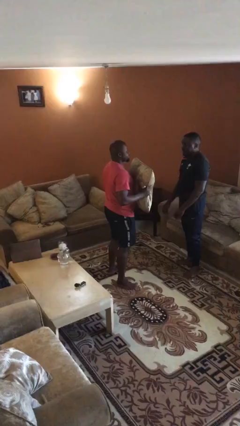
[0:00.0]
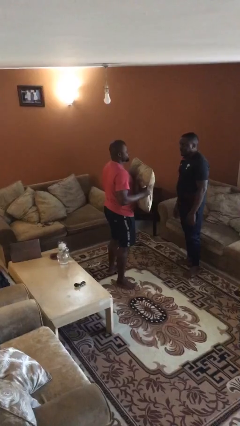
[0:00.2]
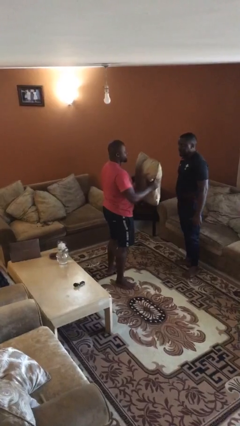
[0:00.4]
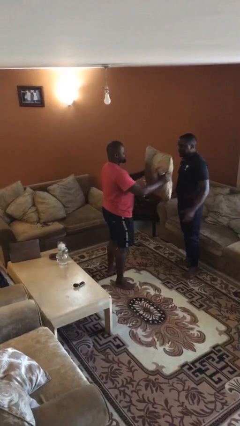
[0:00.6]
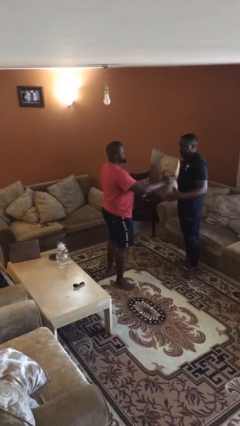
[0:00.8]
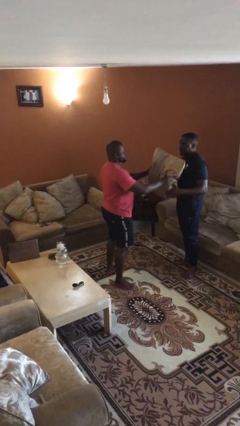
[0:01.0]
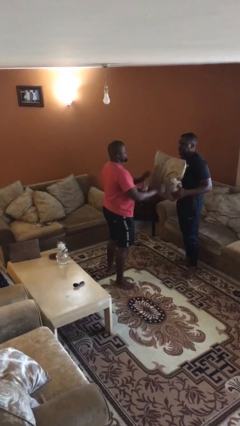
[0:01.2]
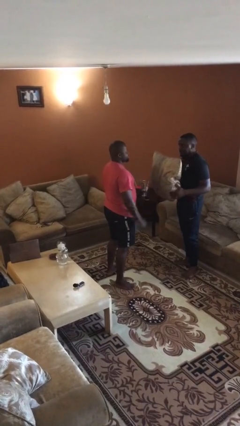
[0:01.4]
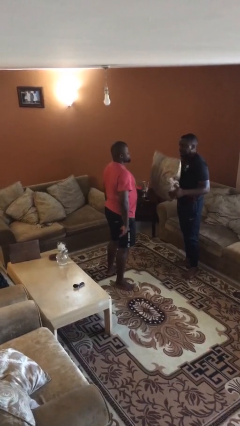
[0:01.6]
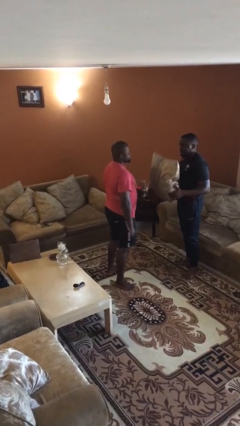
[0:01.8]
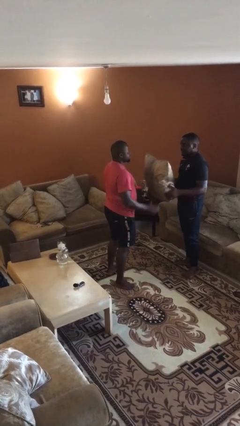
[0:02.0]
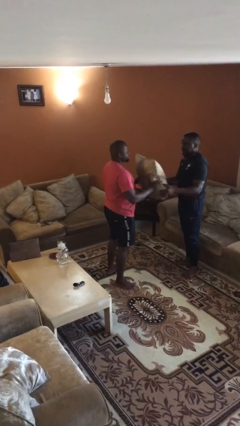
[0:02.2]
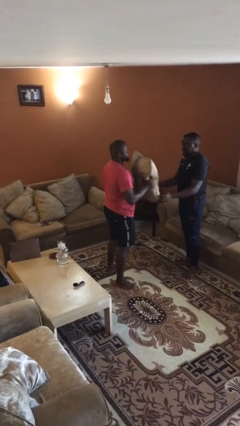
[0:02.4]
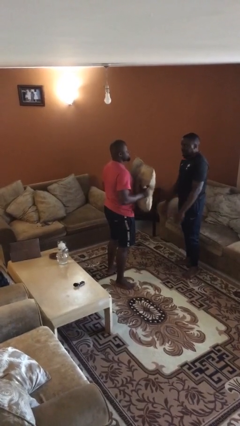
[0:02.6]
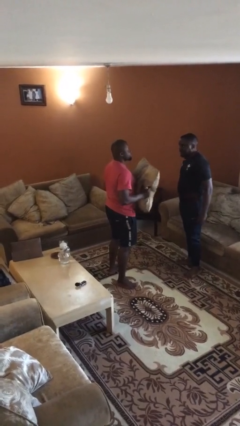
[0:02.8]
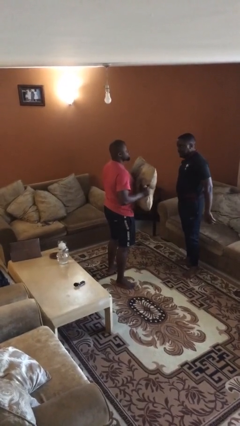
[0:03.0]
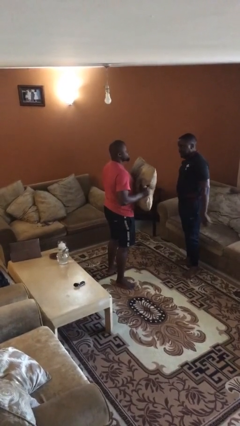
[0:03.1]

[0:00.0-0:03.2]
person transfers object to person

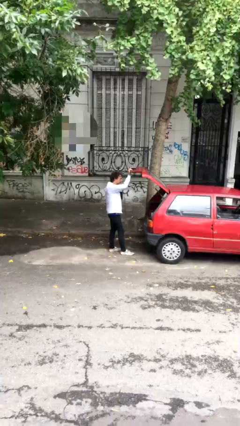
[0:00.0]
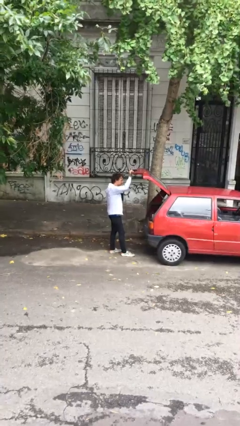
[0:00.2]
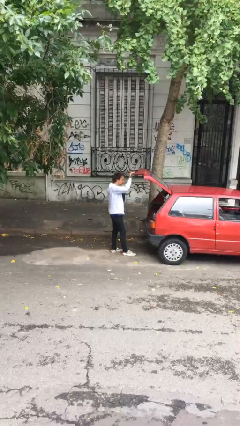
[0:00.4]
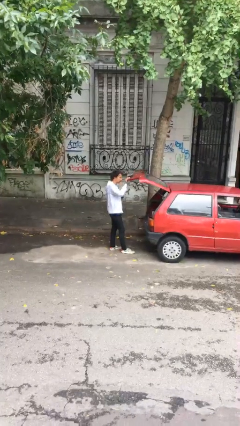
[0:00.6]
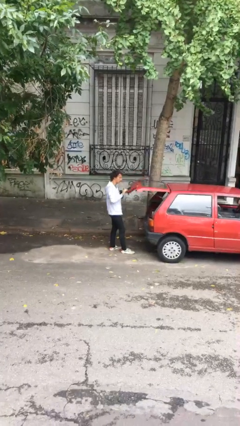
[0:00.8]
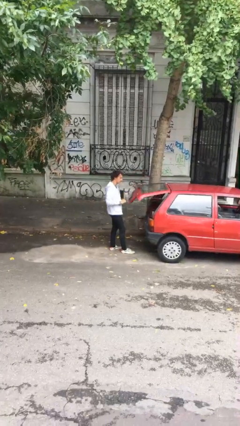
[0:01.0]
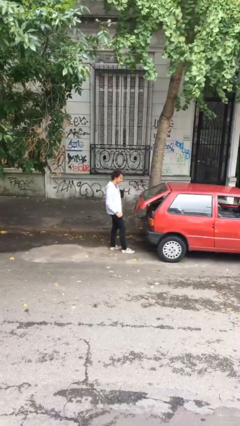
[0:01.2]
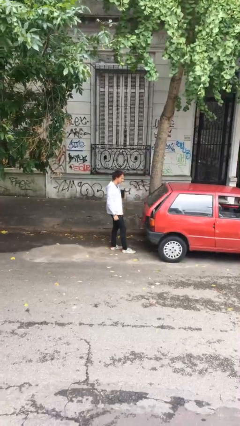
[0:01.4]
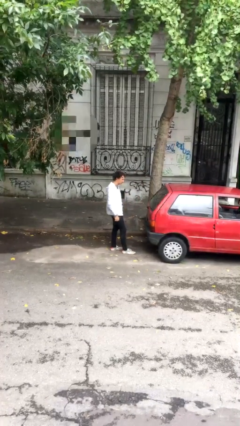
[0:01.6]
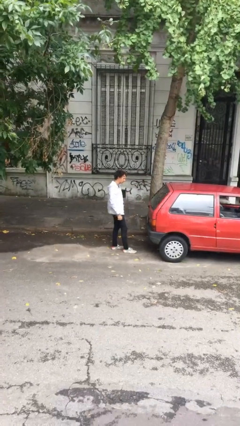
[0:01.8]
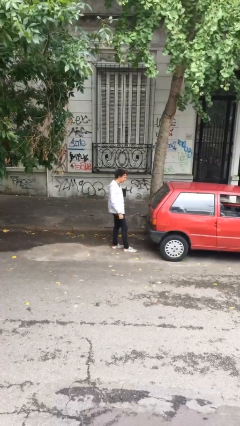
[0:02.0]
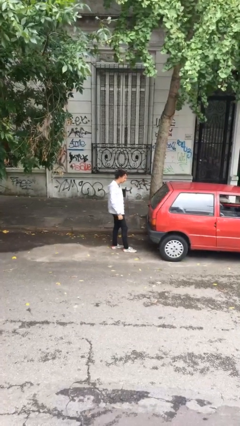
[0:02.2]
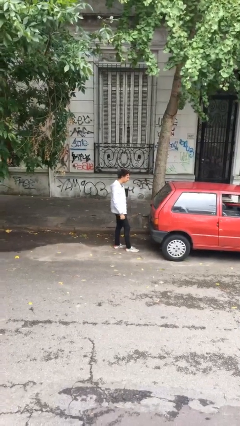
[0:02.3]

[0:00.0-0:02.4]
person closes car trunk

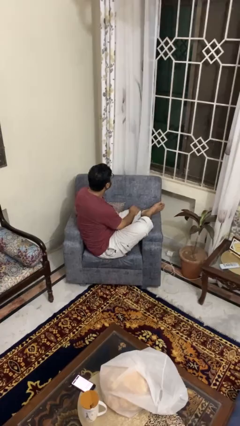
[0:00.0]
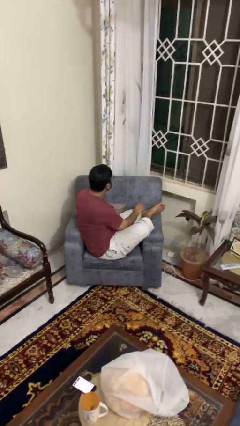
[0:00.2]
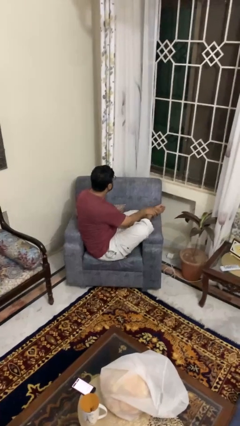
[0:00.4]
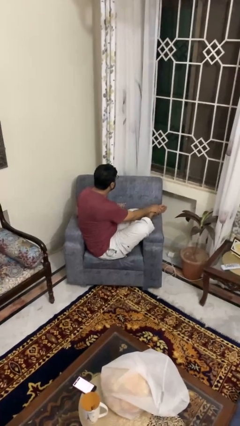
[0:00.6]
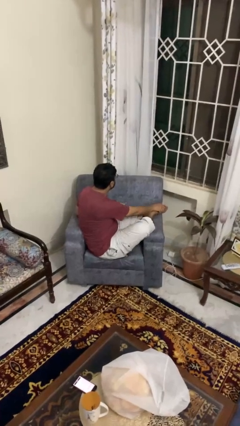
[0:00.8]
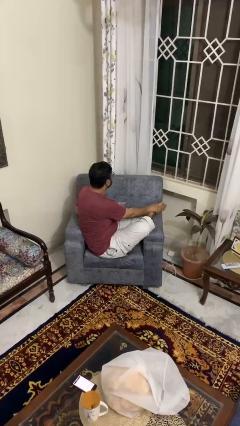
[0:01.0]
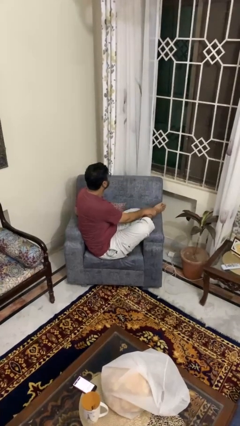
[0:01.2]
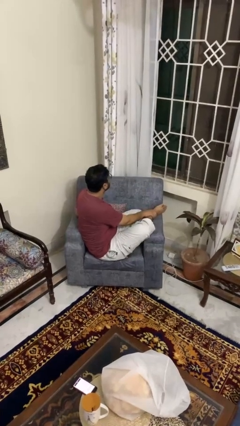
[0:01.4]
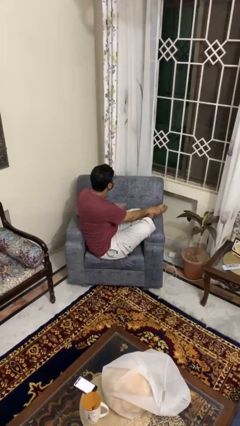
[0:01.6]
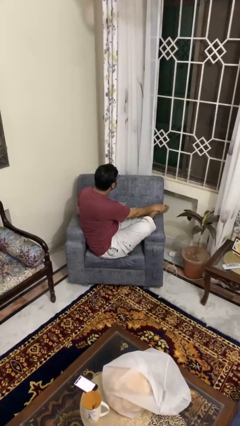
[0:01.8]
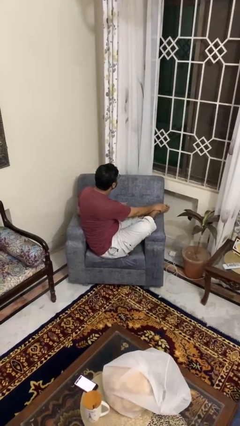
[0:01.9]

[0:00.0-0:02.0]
person rubs foot

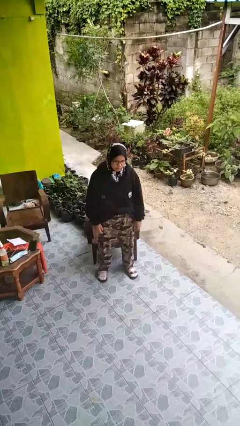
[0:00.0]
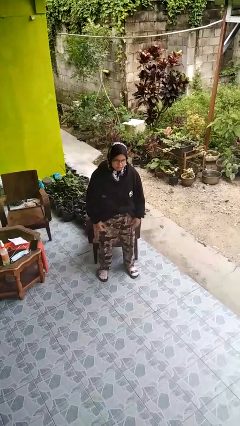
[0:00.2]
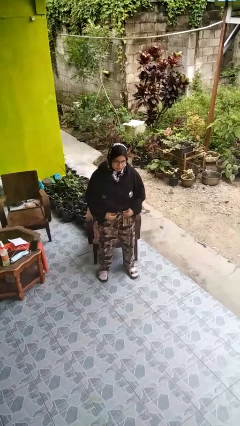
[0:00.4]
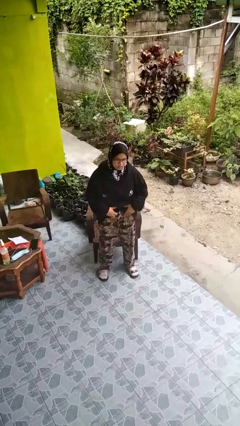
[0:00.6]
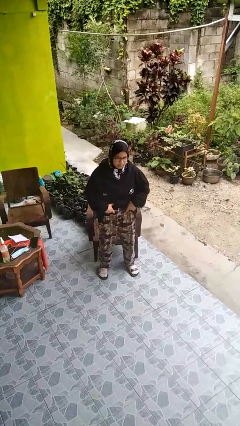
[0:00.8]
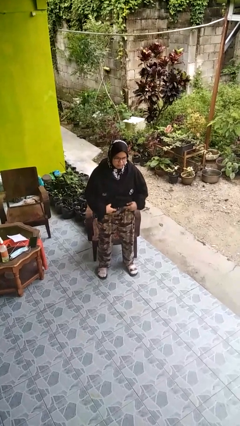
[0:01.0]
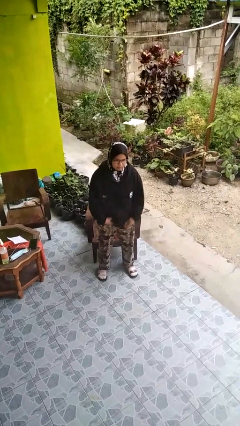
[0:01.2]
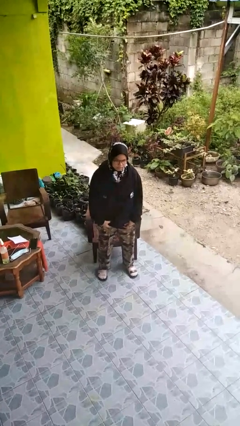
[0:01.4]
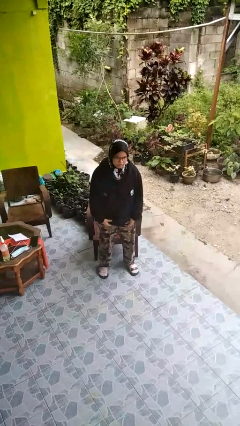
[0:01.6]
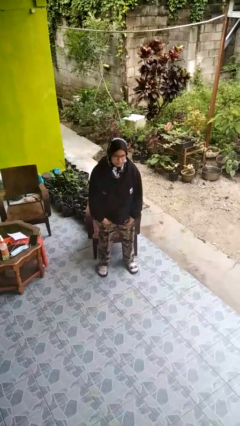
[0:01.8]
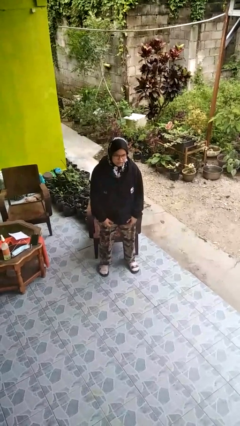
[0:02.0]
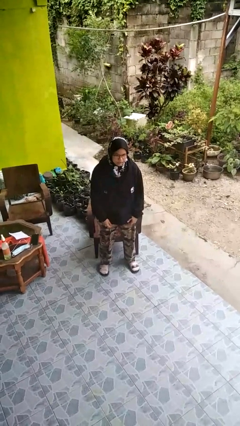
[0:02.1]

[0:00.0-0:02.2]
person untucks shirt

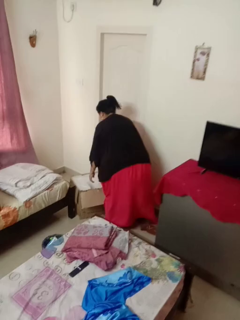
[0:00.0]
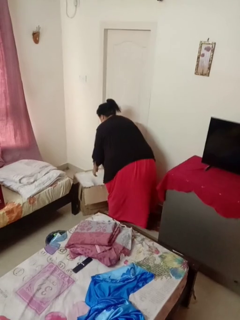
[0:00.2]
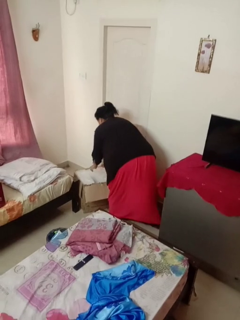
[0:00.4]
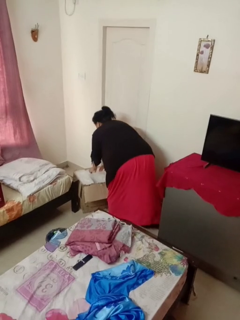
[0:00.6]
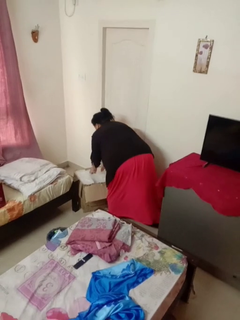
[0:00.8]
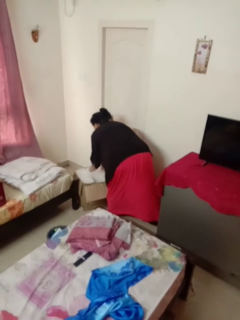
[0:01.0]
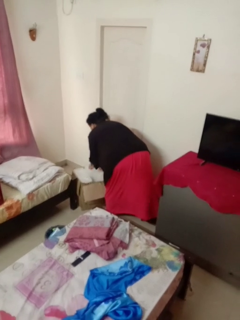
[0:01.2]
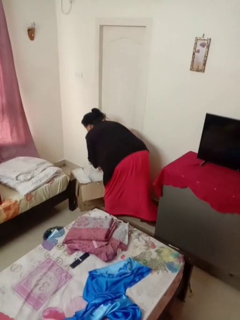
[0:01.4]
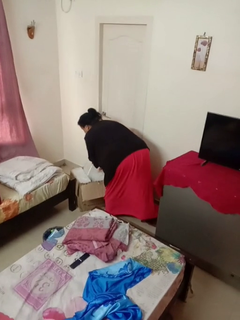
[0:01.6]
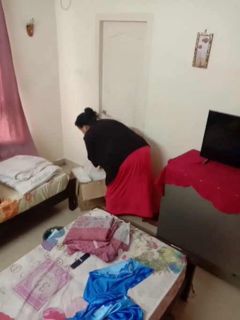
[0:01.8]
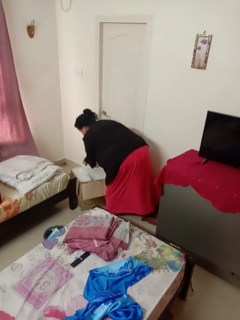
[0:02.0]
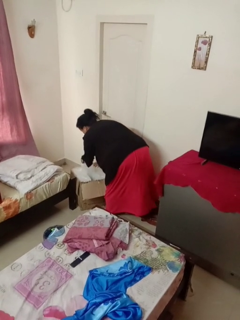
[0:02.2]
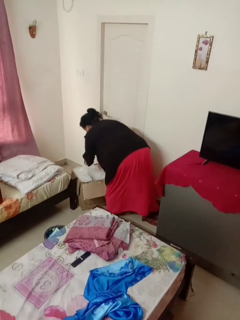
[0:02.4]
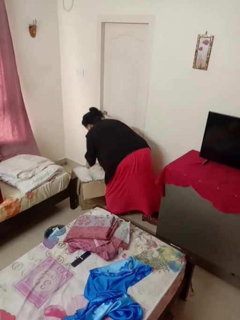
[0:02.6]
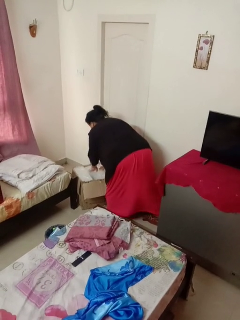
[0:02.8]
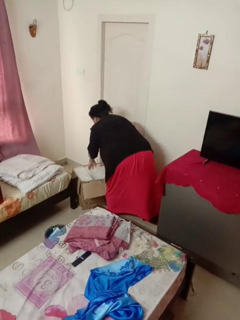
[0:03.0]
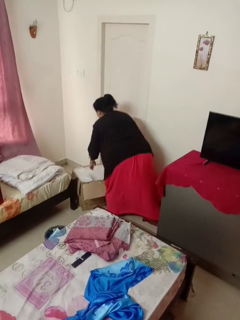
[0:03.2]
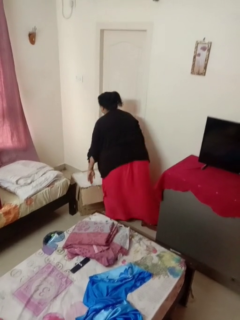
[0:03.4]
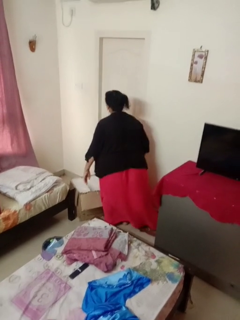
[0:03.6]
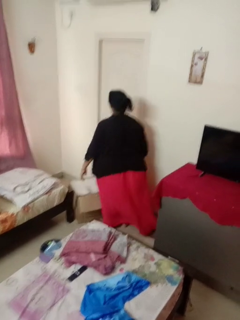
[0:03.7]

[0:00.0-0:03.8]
person searches in box

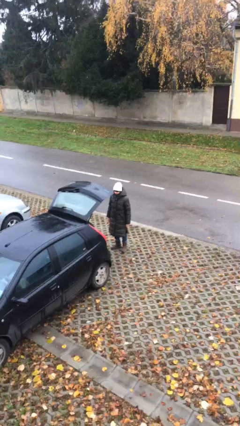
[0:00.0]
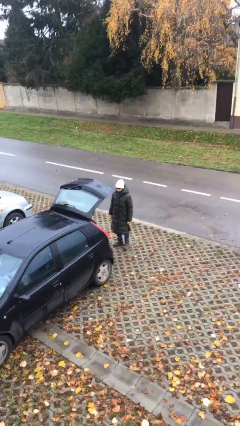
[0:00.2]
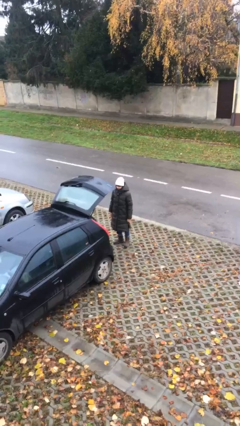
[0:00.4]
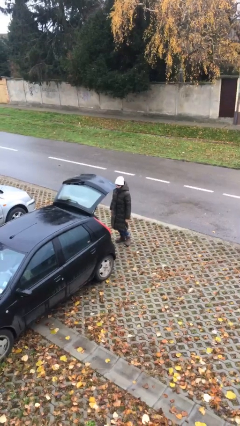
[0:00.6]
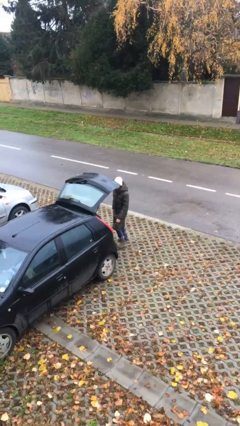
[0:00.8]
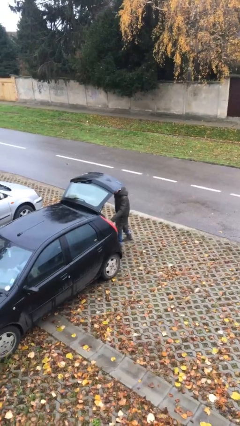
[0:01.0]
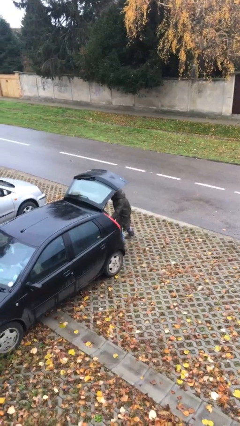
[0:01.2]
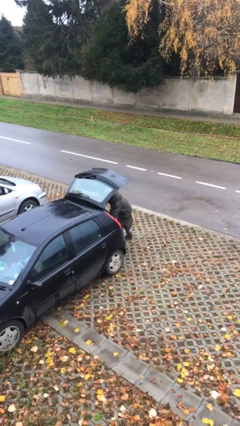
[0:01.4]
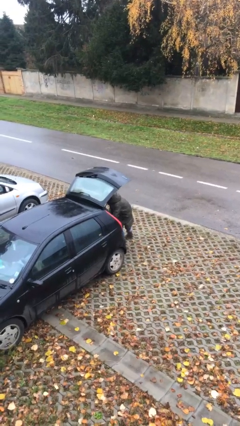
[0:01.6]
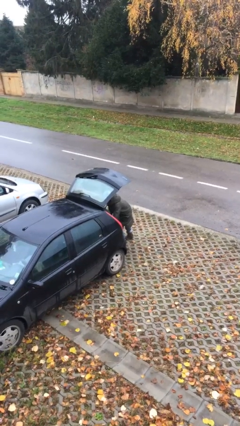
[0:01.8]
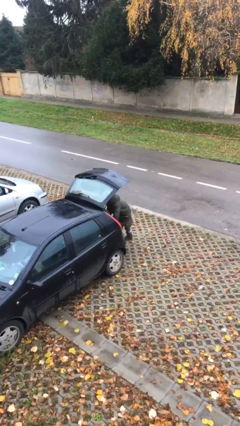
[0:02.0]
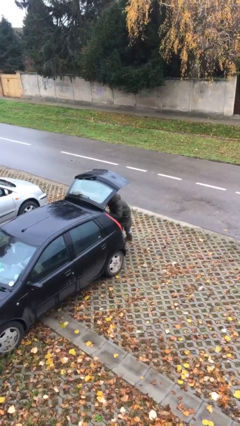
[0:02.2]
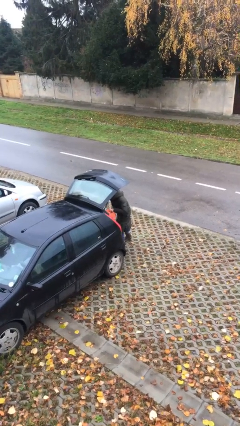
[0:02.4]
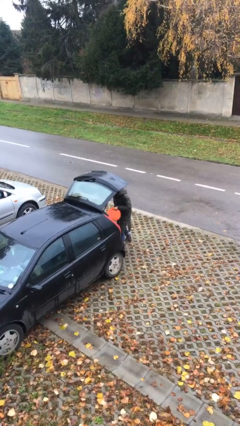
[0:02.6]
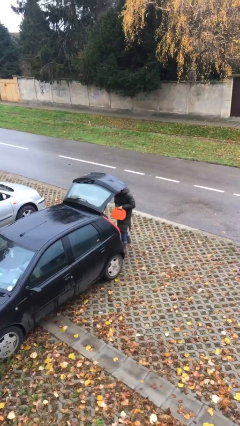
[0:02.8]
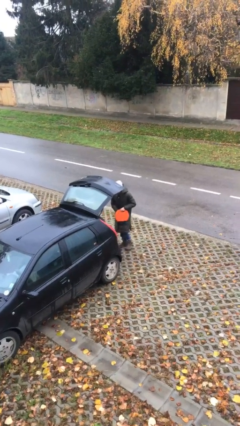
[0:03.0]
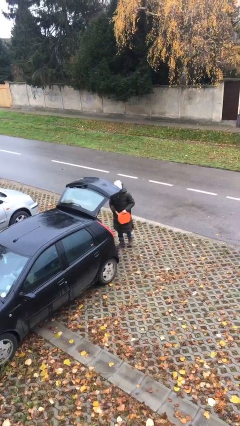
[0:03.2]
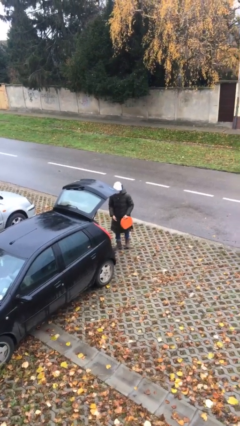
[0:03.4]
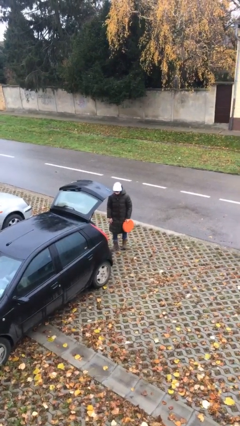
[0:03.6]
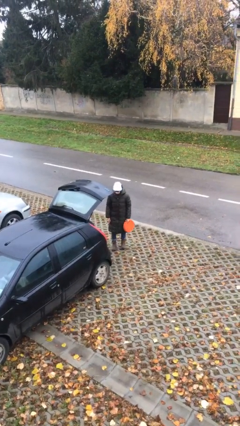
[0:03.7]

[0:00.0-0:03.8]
person unloads car

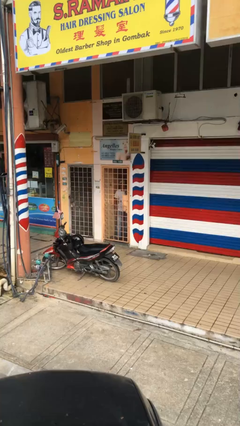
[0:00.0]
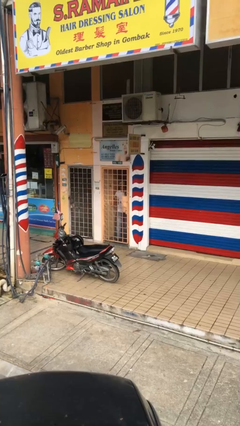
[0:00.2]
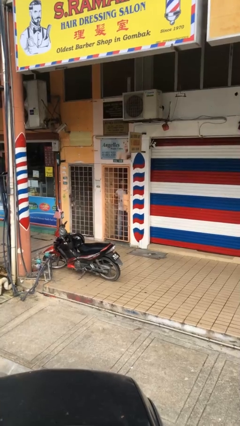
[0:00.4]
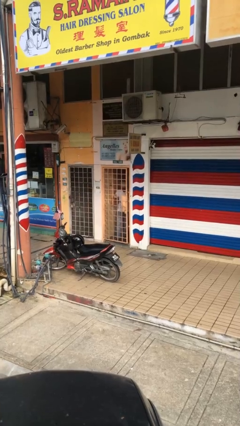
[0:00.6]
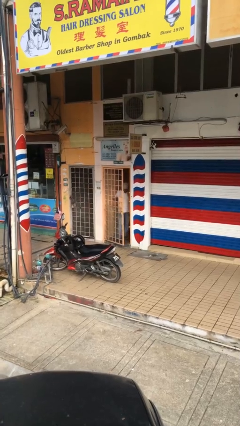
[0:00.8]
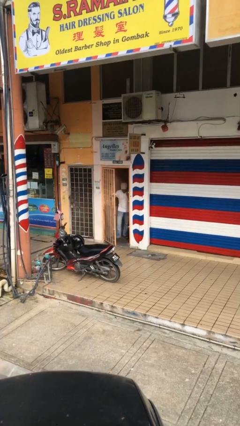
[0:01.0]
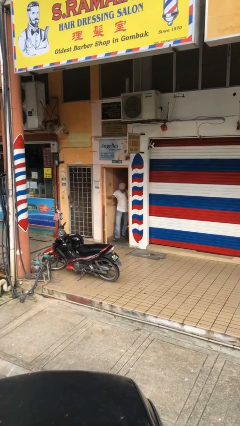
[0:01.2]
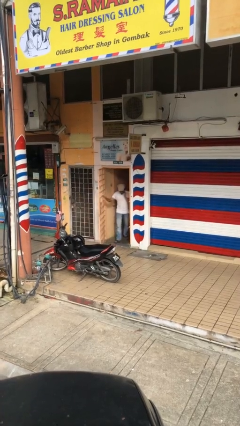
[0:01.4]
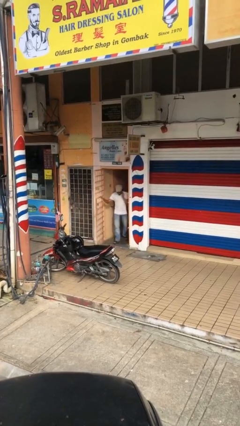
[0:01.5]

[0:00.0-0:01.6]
person opens facility door
